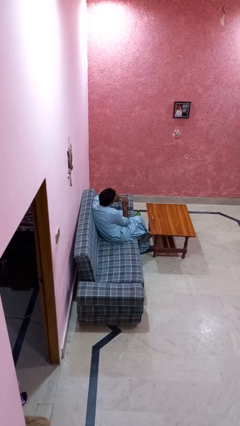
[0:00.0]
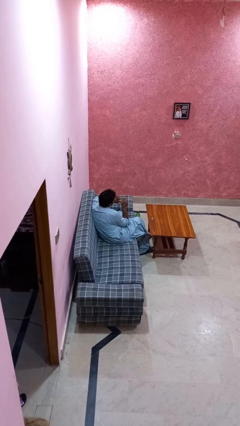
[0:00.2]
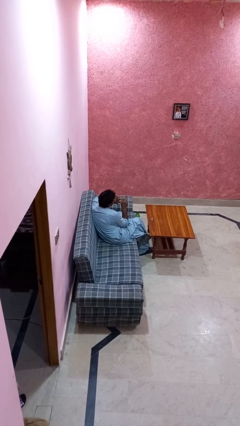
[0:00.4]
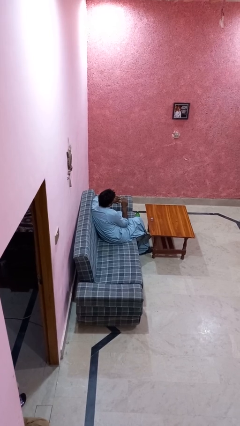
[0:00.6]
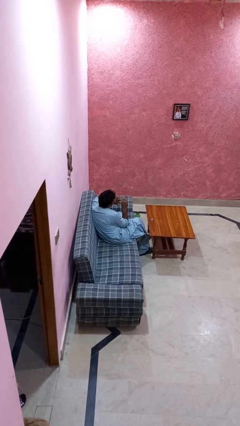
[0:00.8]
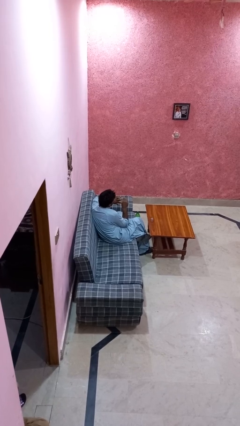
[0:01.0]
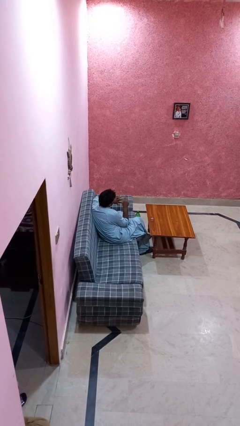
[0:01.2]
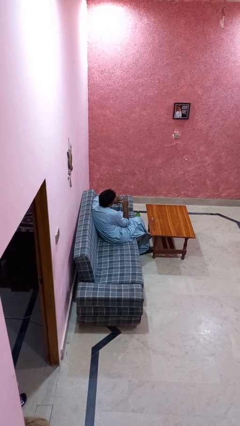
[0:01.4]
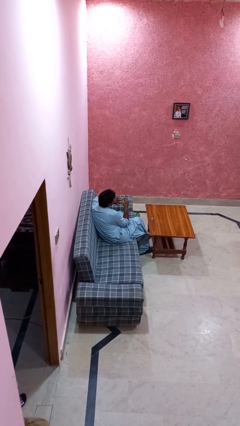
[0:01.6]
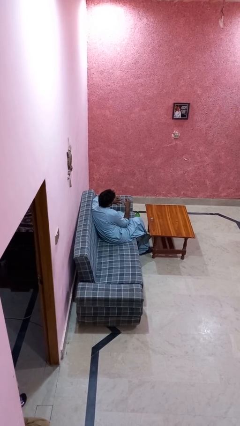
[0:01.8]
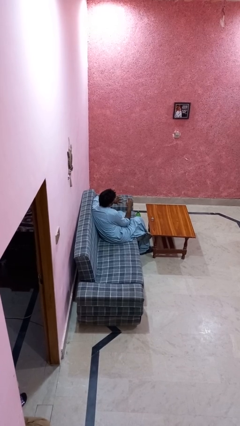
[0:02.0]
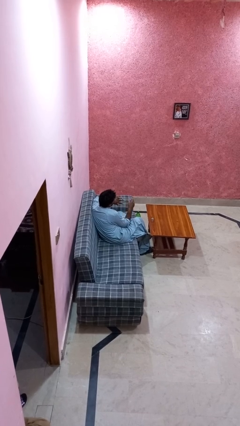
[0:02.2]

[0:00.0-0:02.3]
person paints fingernails

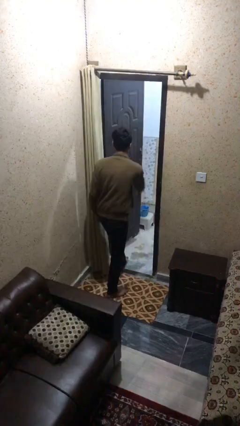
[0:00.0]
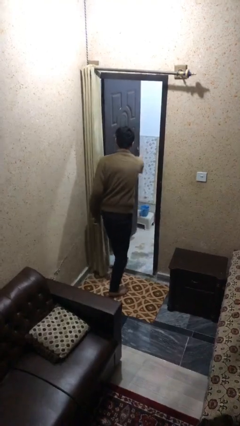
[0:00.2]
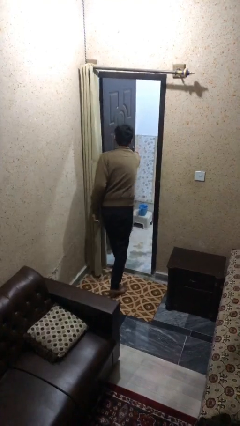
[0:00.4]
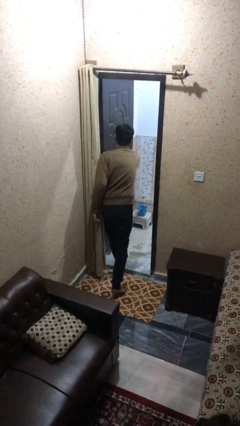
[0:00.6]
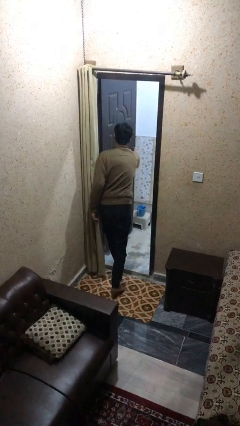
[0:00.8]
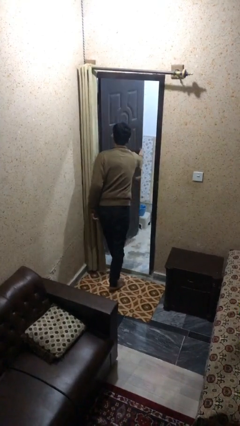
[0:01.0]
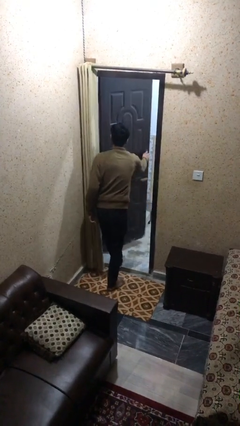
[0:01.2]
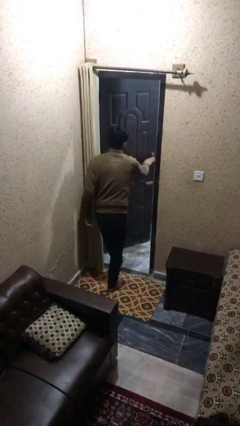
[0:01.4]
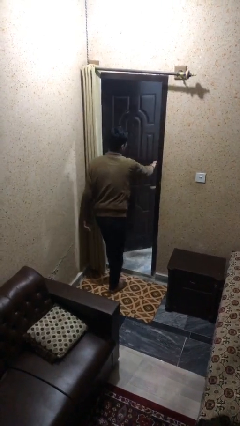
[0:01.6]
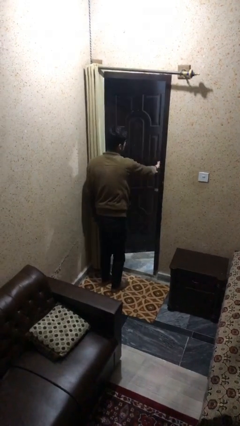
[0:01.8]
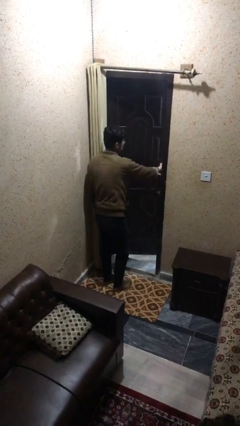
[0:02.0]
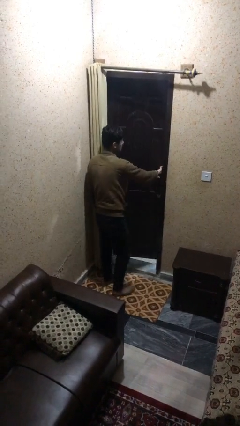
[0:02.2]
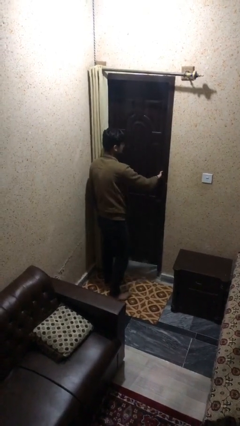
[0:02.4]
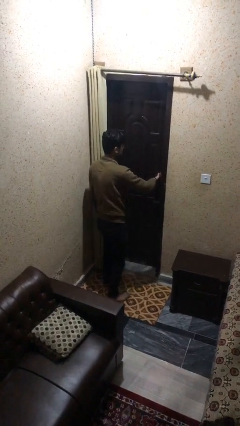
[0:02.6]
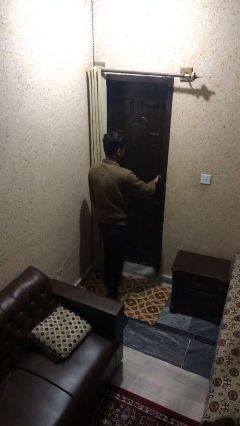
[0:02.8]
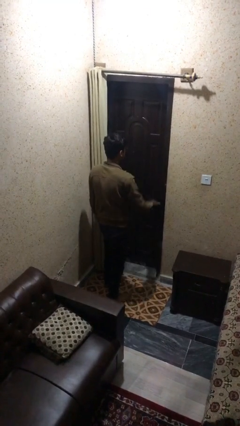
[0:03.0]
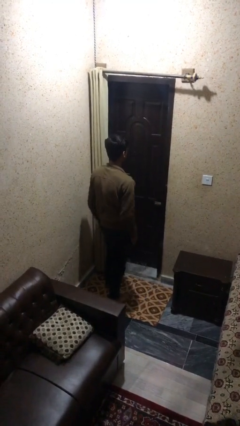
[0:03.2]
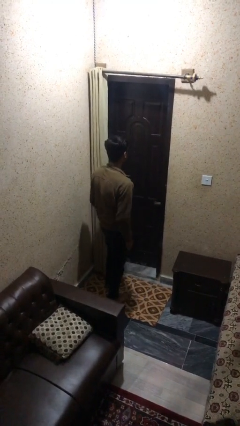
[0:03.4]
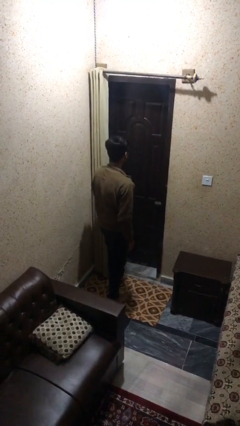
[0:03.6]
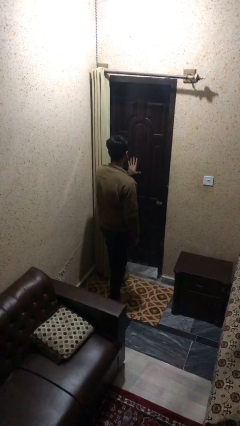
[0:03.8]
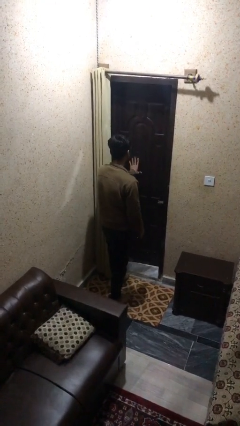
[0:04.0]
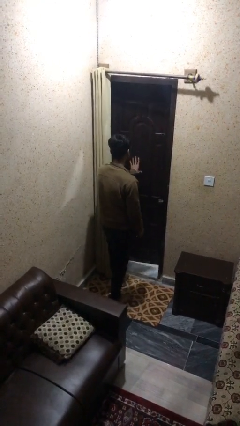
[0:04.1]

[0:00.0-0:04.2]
person closes facility door

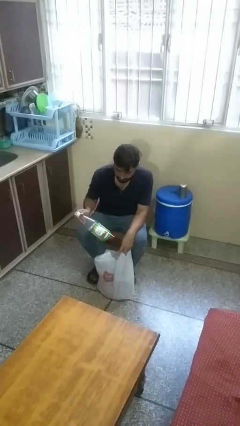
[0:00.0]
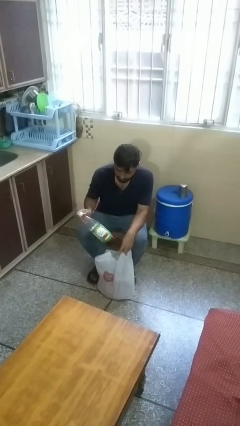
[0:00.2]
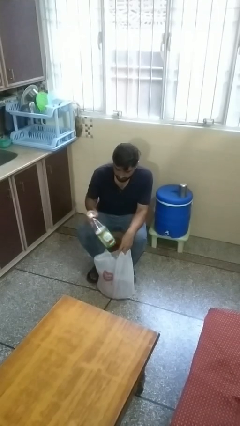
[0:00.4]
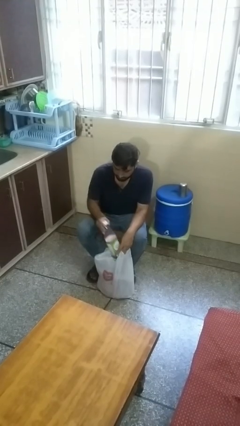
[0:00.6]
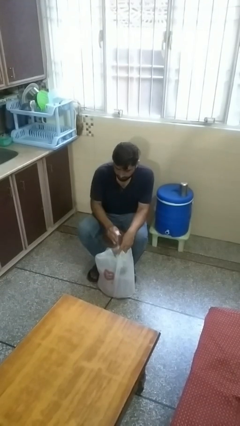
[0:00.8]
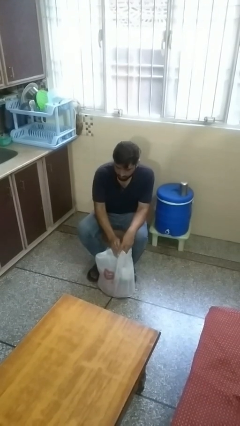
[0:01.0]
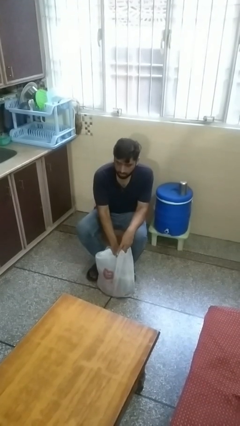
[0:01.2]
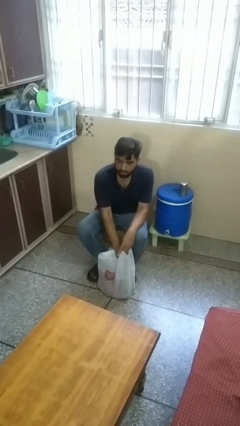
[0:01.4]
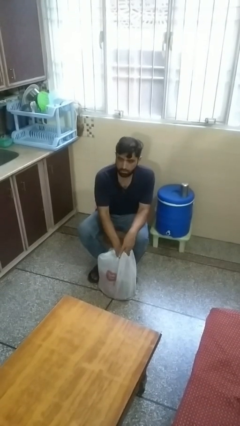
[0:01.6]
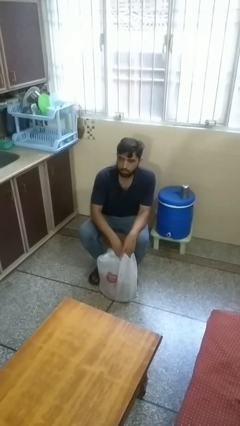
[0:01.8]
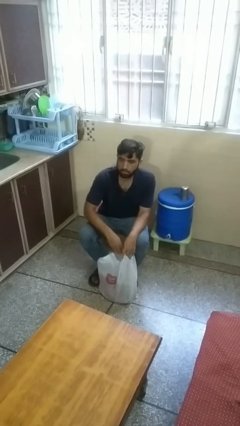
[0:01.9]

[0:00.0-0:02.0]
person puts object into bag

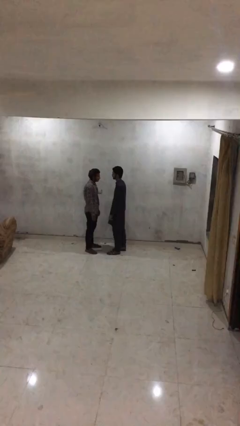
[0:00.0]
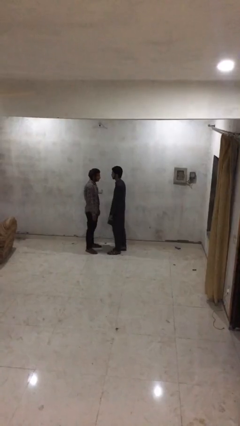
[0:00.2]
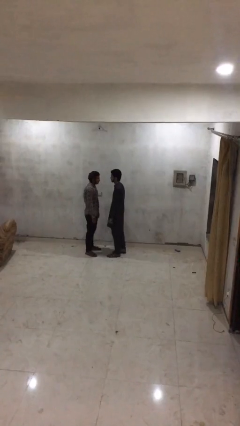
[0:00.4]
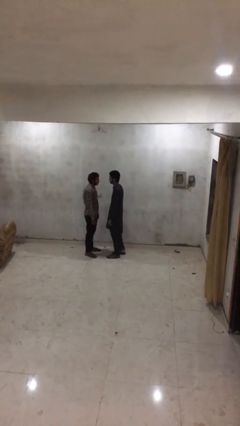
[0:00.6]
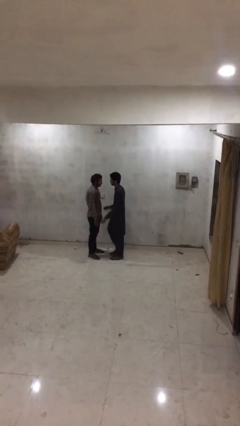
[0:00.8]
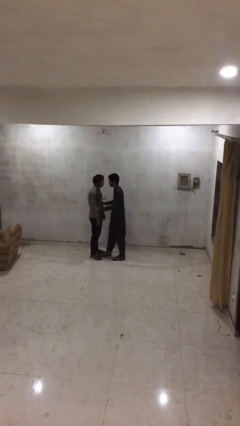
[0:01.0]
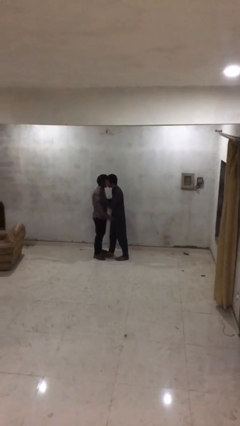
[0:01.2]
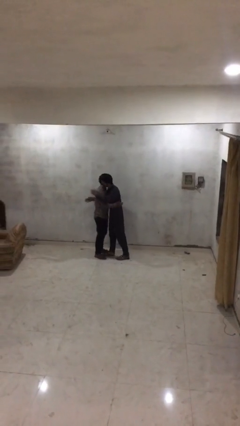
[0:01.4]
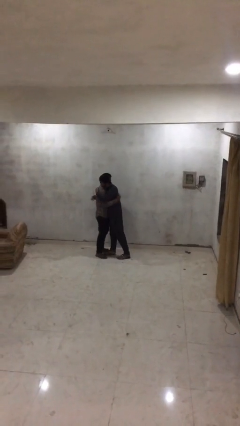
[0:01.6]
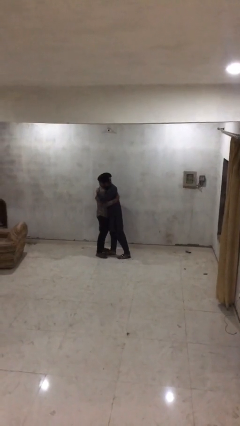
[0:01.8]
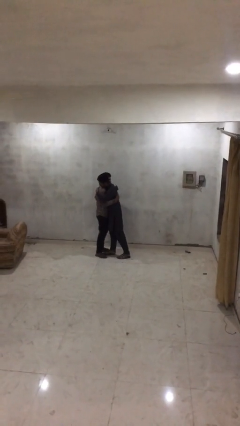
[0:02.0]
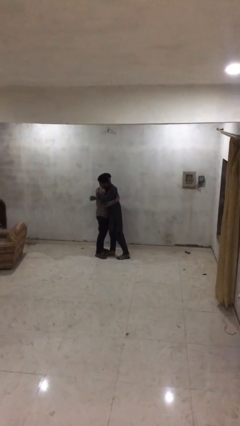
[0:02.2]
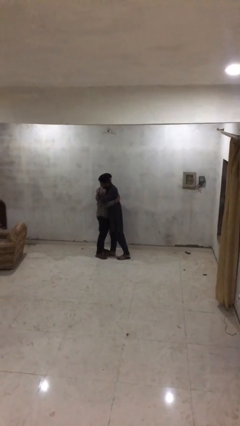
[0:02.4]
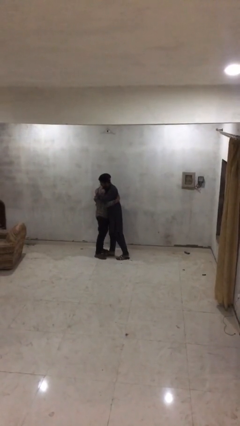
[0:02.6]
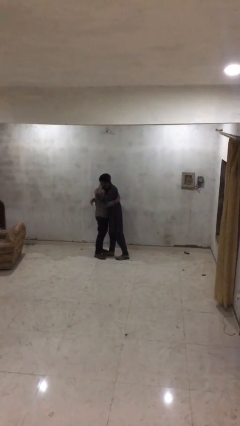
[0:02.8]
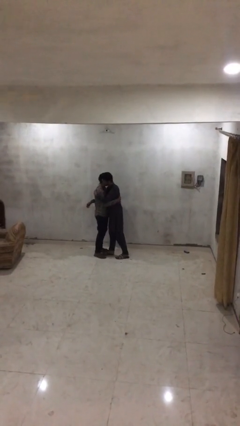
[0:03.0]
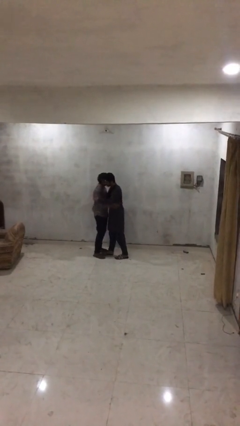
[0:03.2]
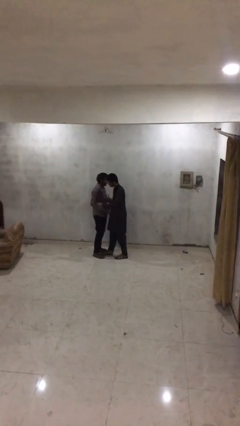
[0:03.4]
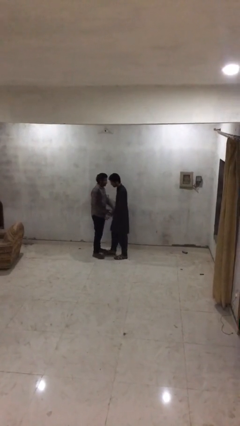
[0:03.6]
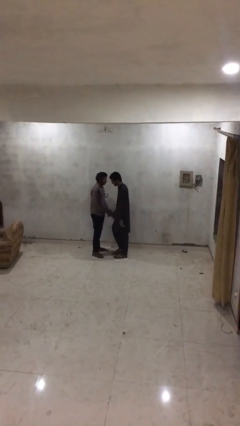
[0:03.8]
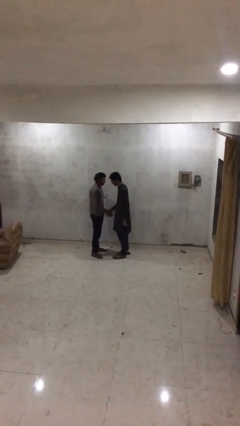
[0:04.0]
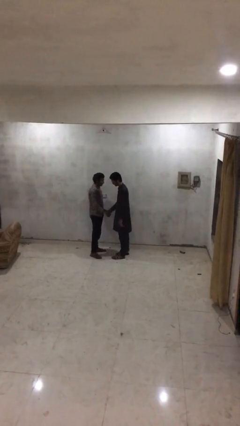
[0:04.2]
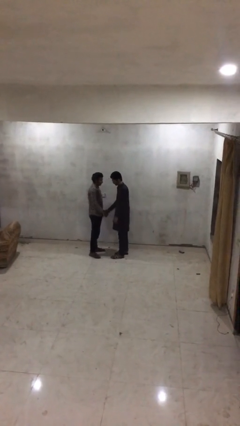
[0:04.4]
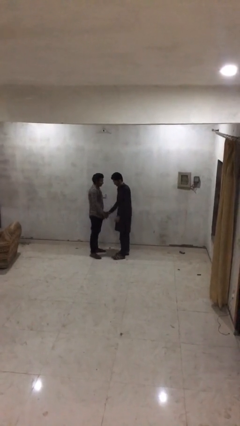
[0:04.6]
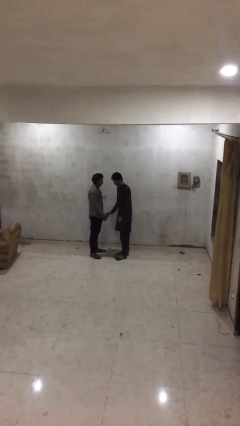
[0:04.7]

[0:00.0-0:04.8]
person embraces person

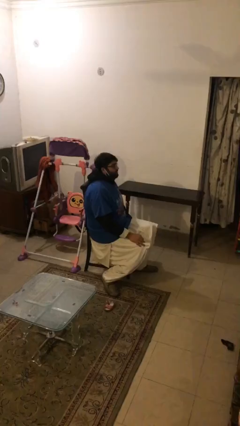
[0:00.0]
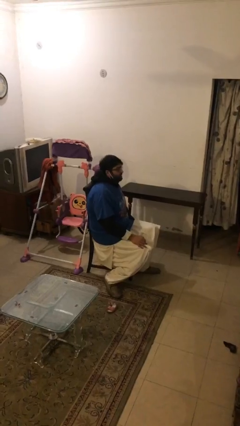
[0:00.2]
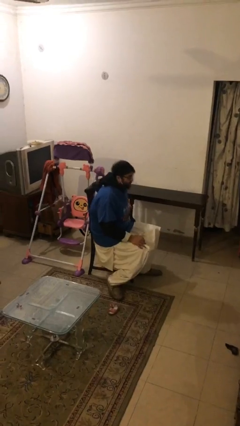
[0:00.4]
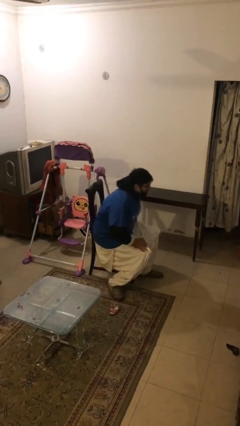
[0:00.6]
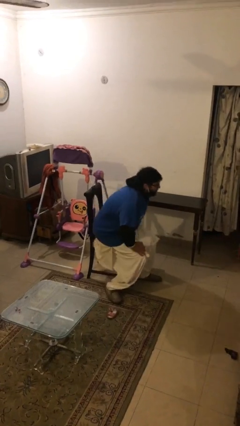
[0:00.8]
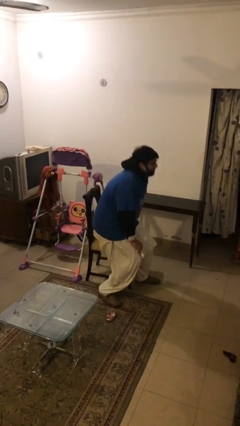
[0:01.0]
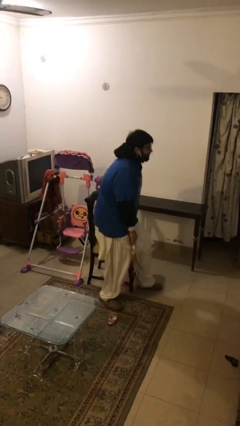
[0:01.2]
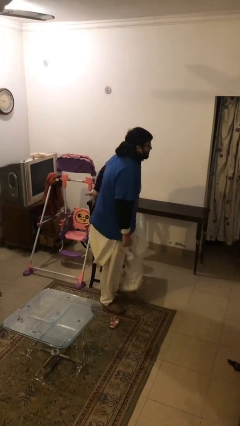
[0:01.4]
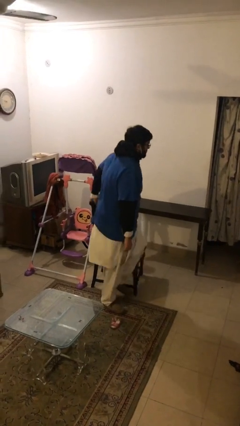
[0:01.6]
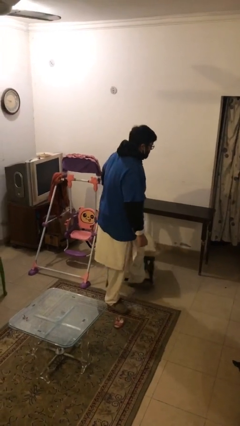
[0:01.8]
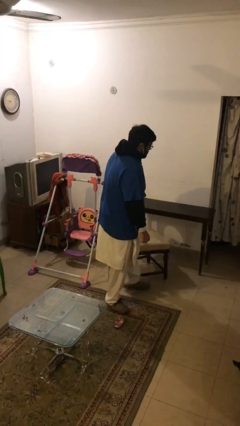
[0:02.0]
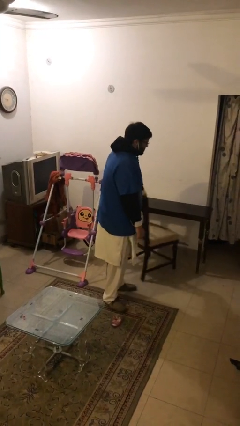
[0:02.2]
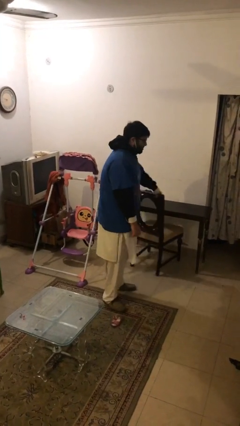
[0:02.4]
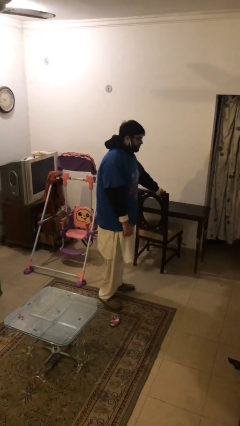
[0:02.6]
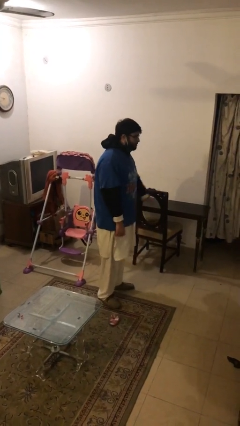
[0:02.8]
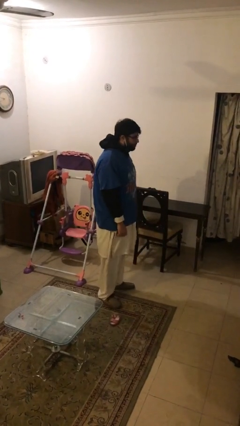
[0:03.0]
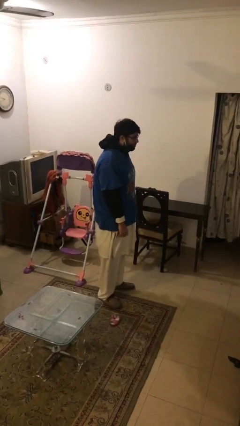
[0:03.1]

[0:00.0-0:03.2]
person stands up

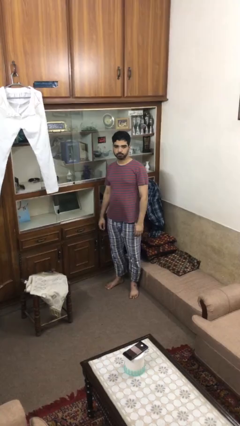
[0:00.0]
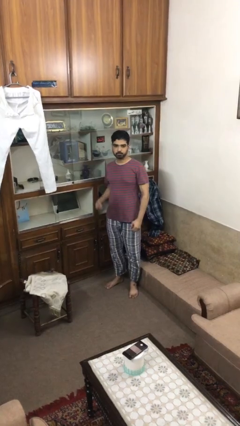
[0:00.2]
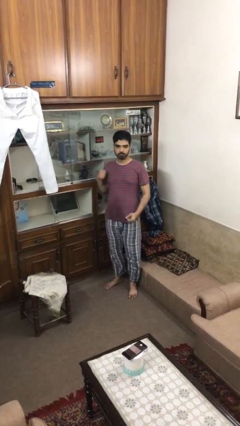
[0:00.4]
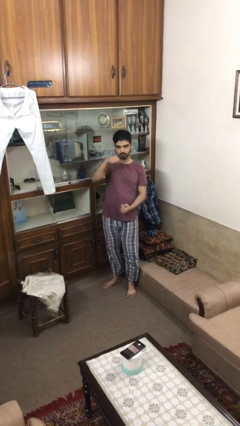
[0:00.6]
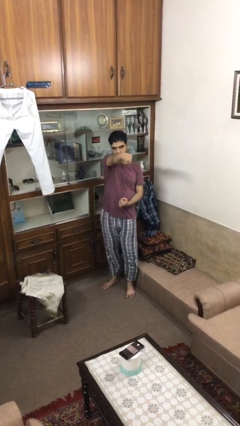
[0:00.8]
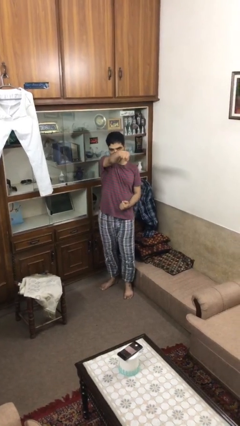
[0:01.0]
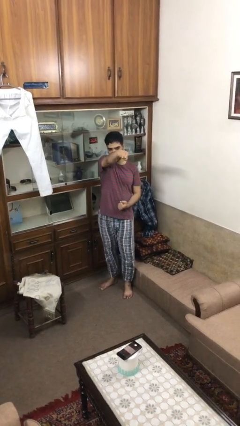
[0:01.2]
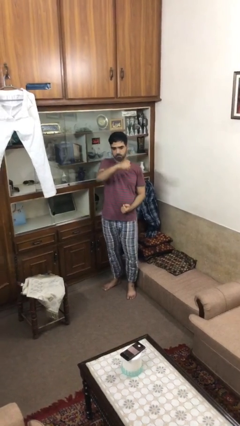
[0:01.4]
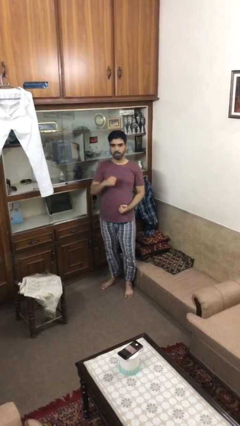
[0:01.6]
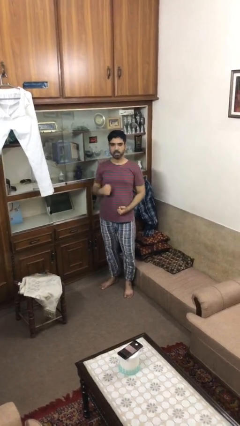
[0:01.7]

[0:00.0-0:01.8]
person punches
